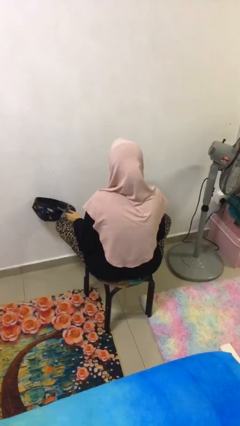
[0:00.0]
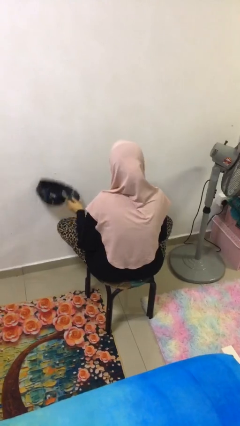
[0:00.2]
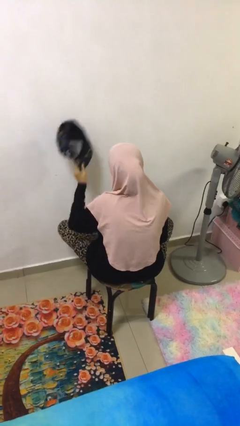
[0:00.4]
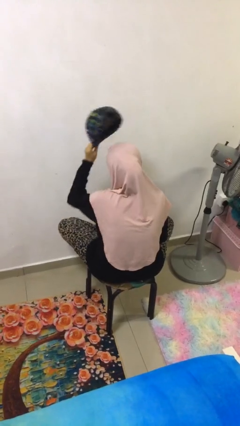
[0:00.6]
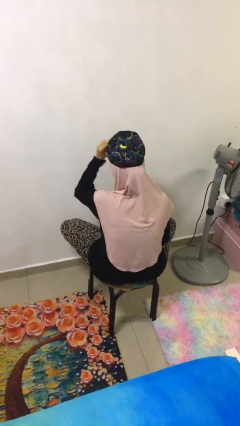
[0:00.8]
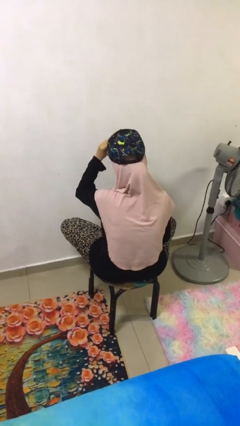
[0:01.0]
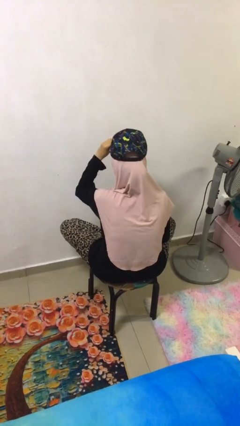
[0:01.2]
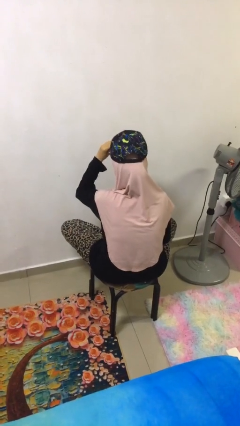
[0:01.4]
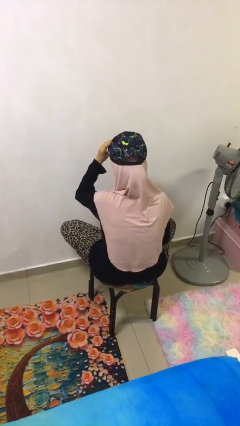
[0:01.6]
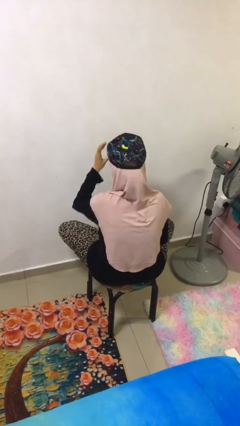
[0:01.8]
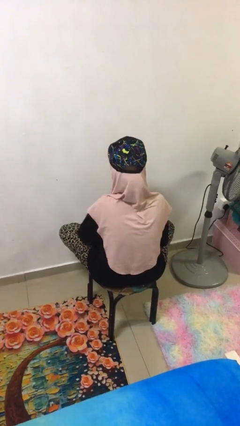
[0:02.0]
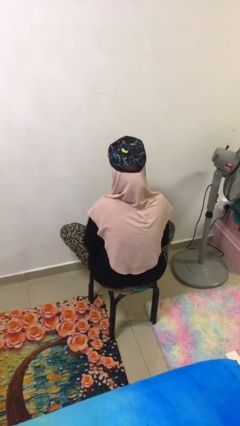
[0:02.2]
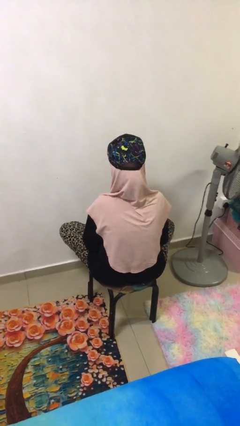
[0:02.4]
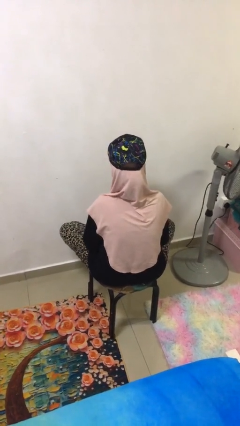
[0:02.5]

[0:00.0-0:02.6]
person puts on hat

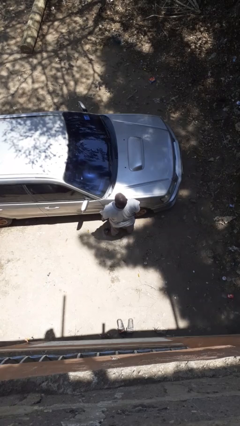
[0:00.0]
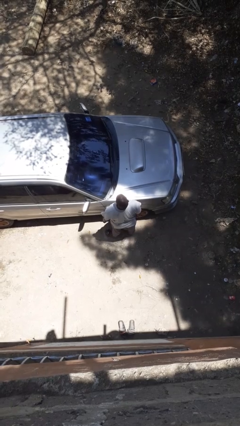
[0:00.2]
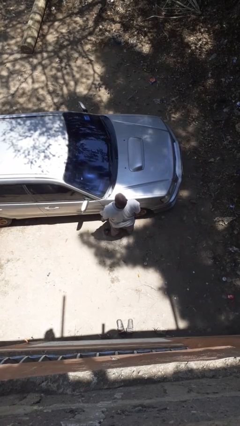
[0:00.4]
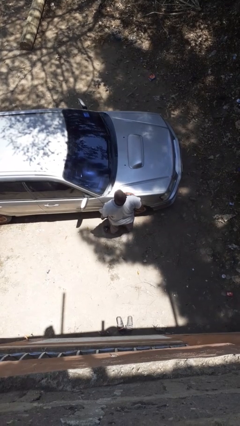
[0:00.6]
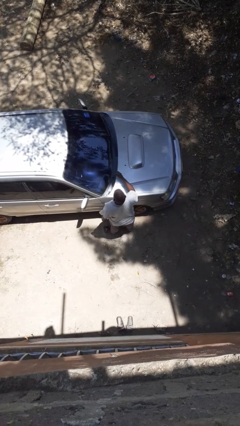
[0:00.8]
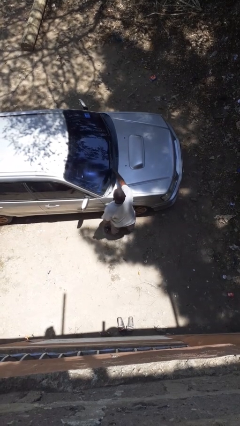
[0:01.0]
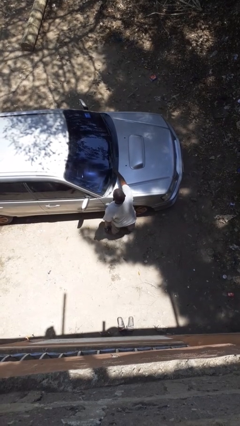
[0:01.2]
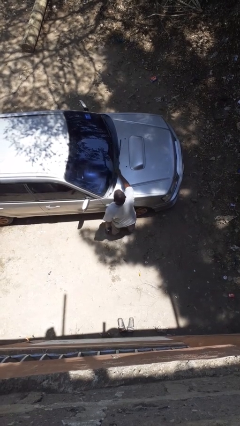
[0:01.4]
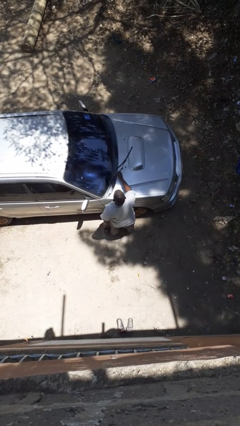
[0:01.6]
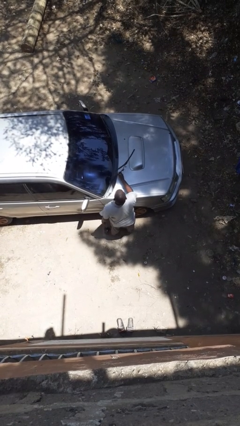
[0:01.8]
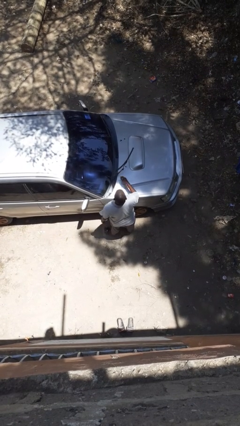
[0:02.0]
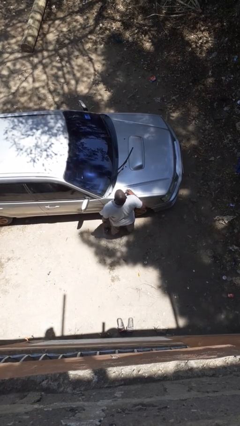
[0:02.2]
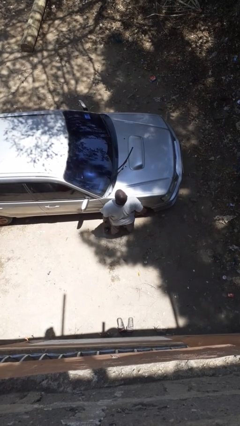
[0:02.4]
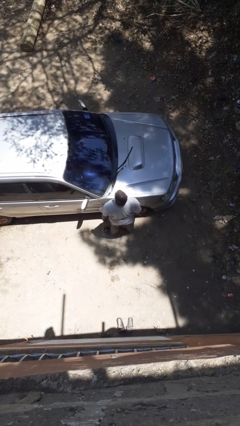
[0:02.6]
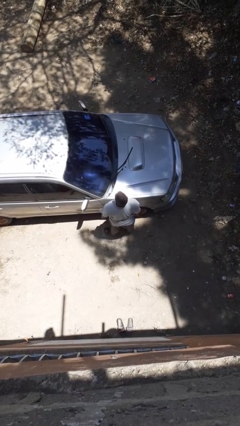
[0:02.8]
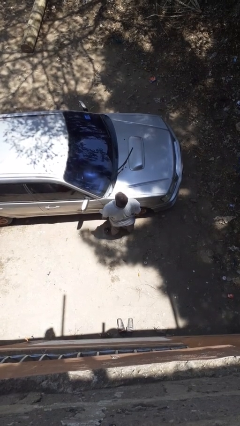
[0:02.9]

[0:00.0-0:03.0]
person flips up car wipers

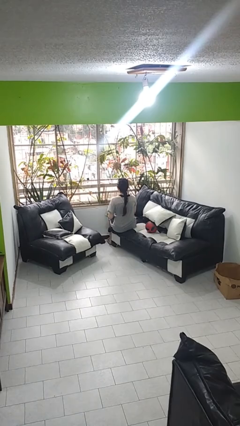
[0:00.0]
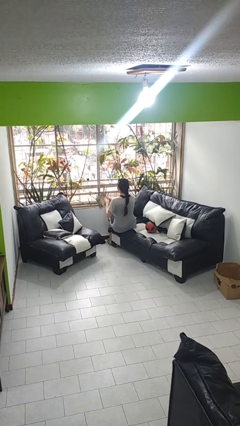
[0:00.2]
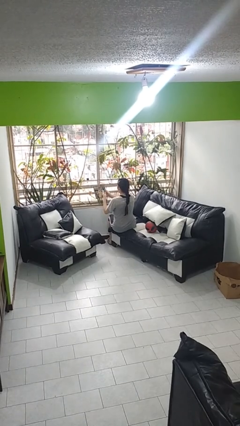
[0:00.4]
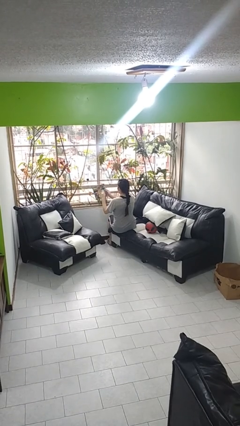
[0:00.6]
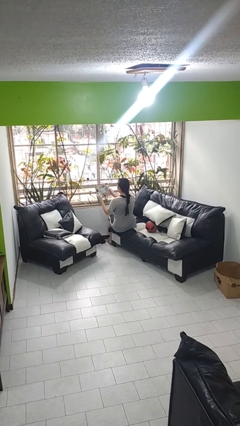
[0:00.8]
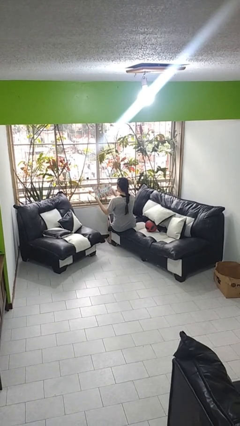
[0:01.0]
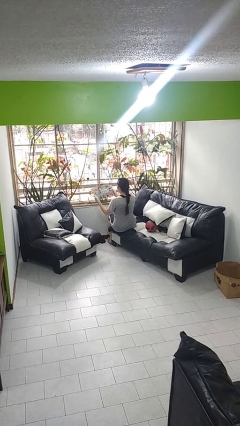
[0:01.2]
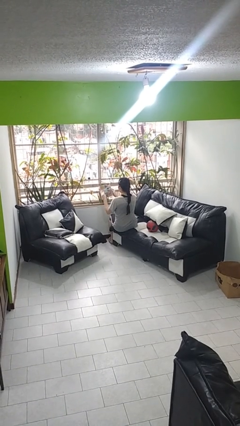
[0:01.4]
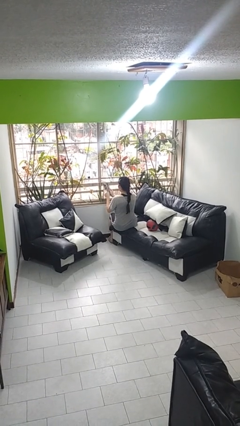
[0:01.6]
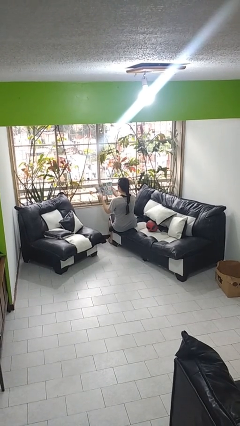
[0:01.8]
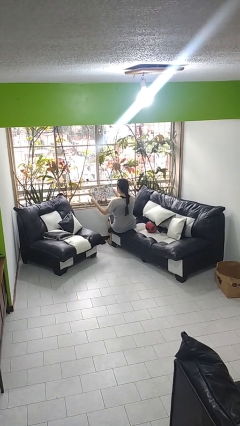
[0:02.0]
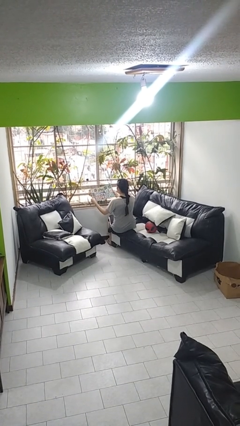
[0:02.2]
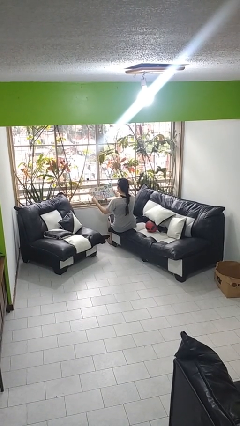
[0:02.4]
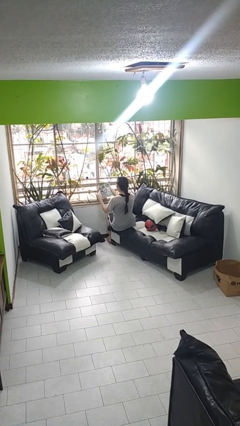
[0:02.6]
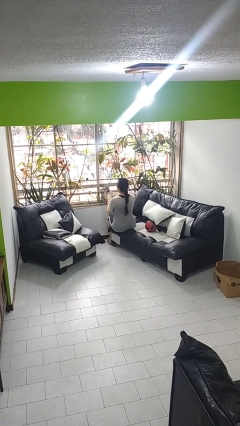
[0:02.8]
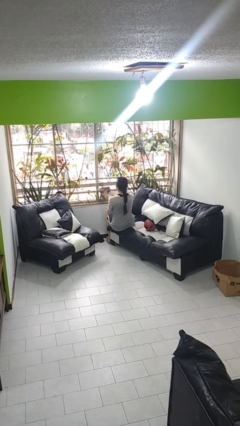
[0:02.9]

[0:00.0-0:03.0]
person reads magazine

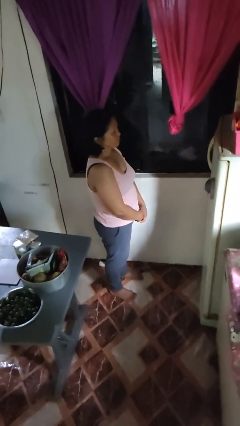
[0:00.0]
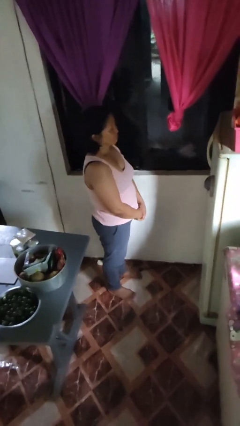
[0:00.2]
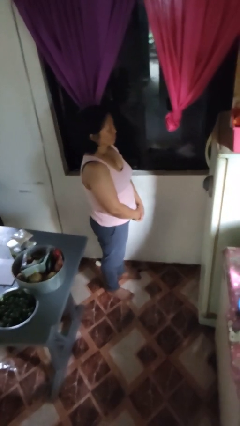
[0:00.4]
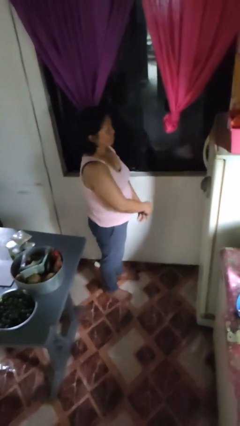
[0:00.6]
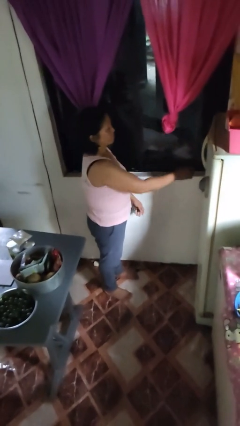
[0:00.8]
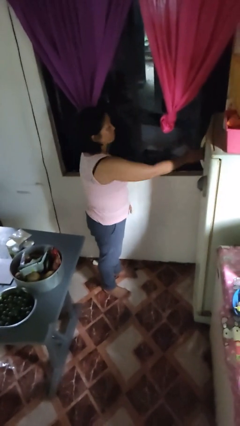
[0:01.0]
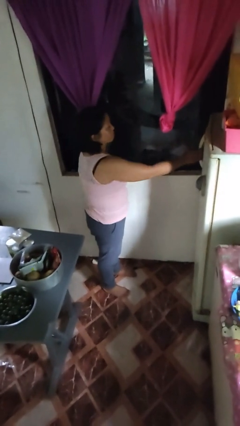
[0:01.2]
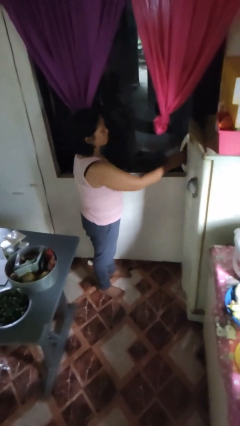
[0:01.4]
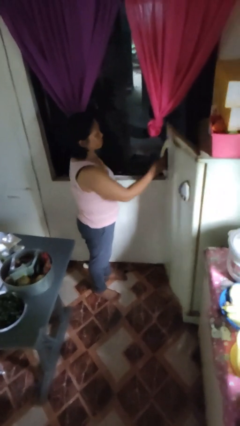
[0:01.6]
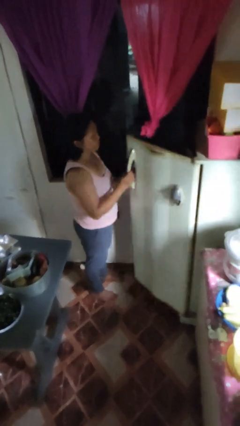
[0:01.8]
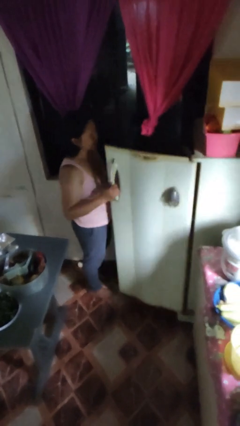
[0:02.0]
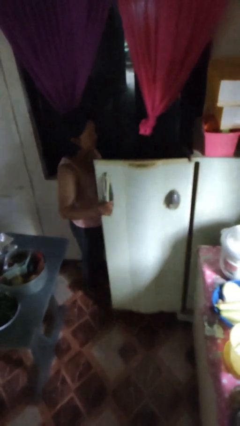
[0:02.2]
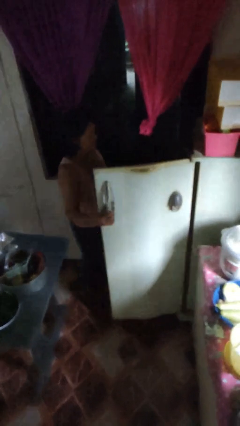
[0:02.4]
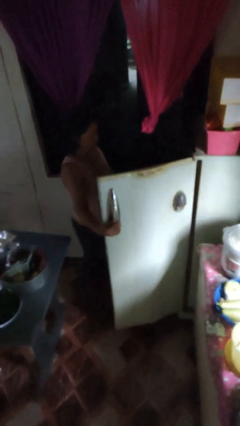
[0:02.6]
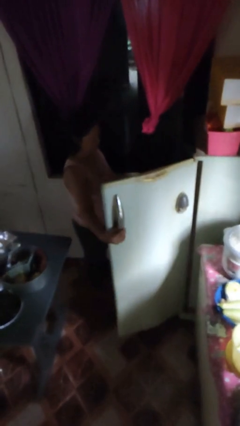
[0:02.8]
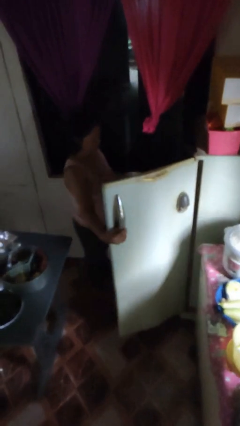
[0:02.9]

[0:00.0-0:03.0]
person opens refrigerator

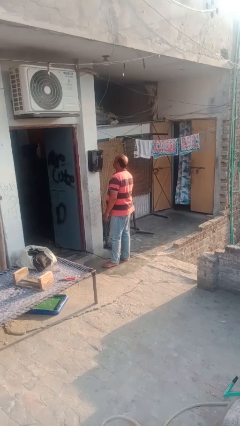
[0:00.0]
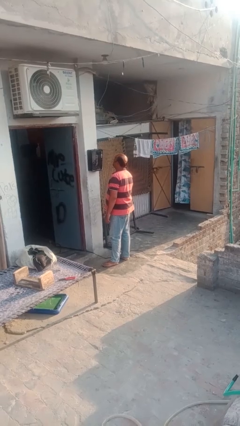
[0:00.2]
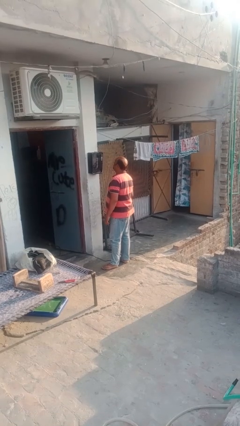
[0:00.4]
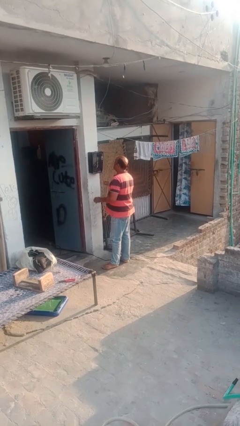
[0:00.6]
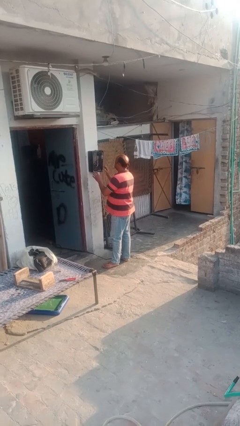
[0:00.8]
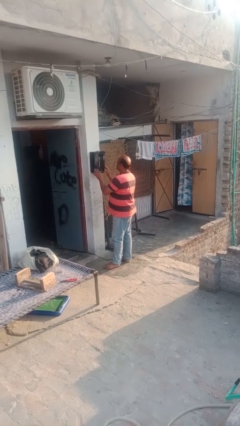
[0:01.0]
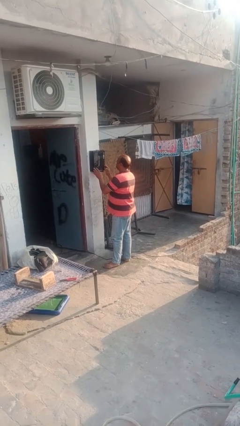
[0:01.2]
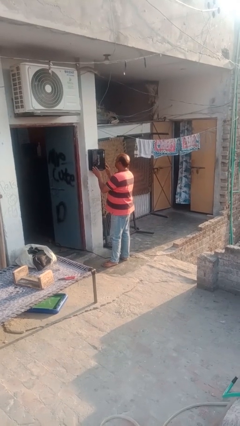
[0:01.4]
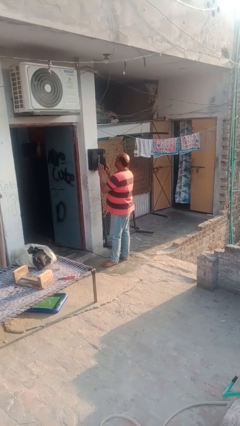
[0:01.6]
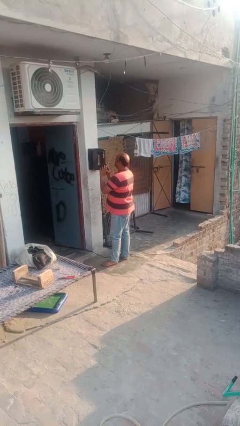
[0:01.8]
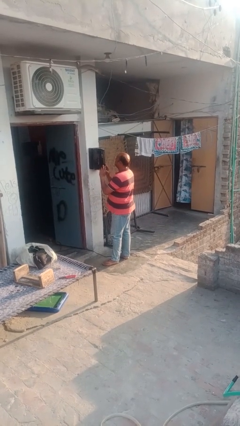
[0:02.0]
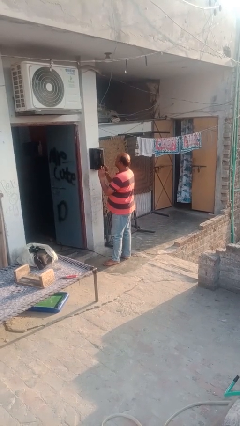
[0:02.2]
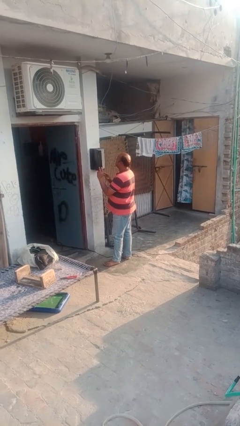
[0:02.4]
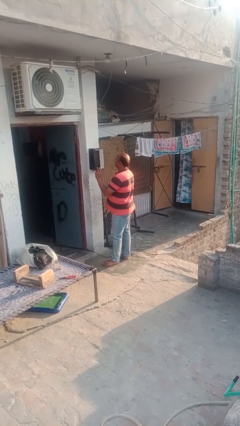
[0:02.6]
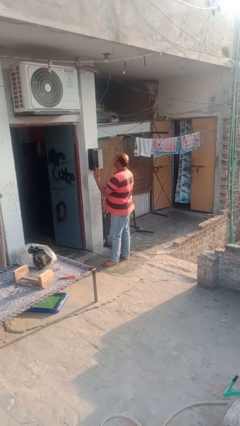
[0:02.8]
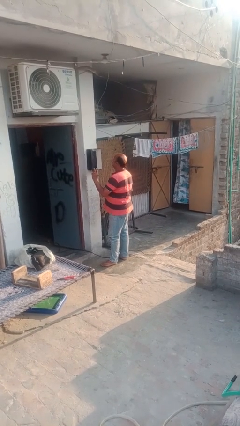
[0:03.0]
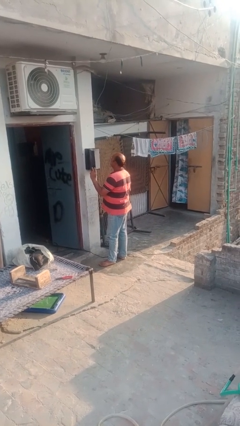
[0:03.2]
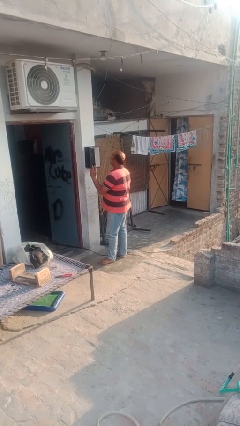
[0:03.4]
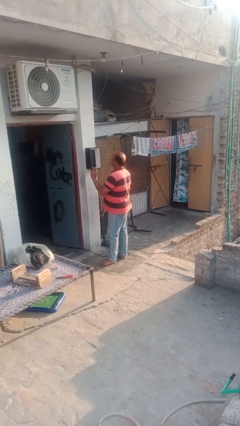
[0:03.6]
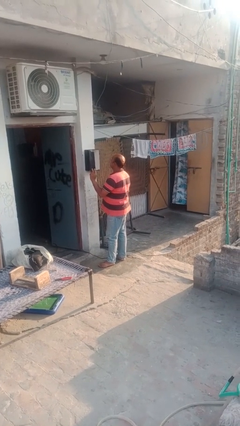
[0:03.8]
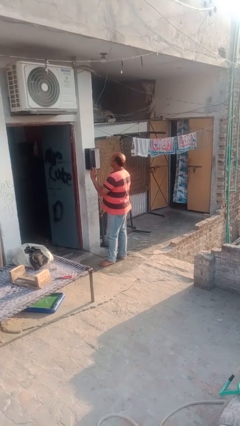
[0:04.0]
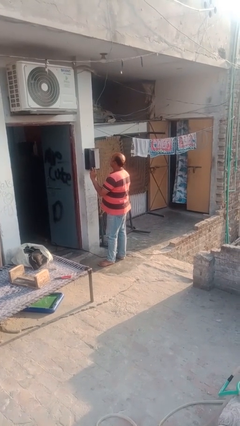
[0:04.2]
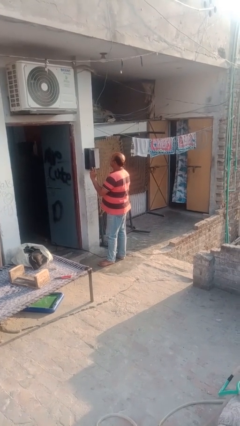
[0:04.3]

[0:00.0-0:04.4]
person opens mailbox

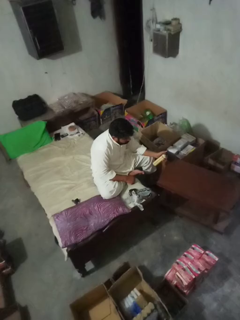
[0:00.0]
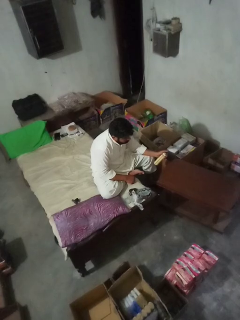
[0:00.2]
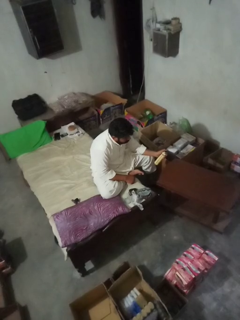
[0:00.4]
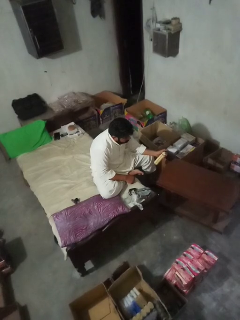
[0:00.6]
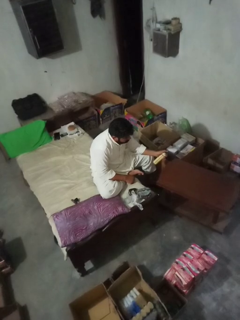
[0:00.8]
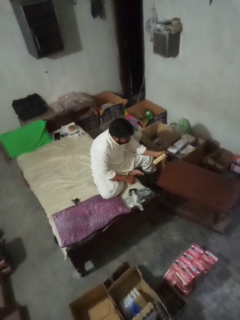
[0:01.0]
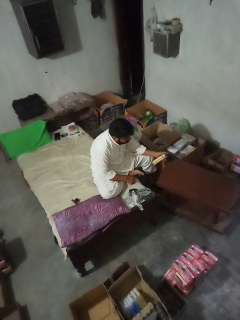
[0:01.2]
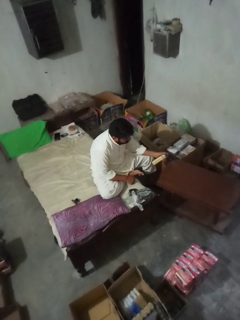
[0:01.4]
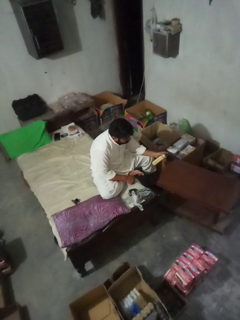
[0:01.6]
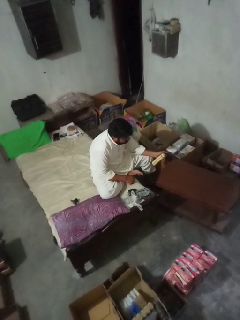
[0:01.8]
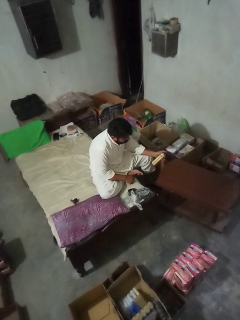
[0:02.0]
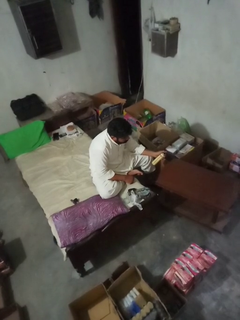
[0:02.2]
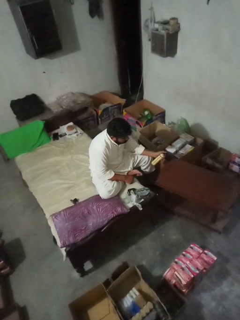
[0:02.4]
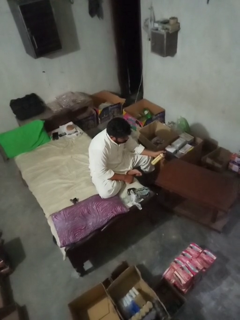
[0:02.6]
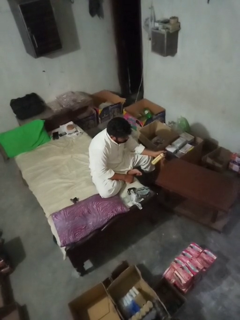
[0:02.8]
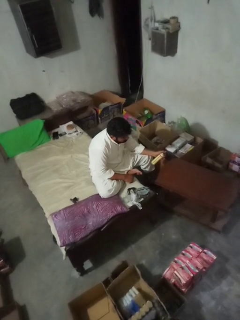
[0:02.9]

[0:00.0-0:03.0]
person sprays from bottle
